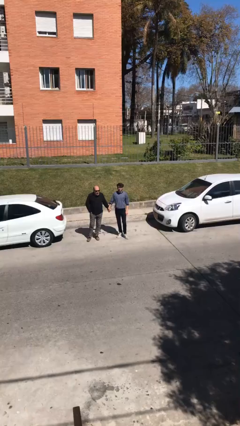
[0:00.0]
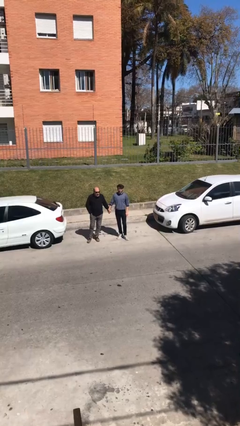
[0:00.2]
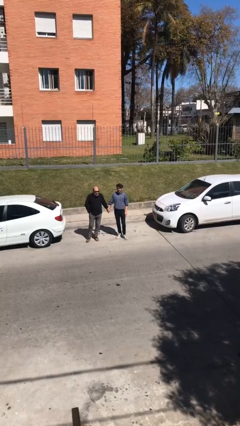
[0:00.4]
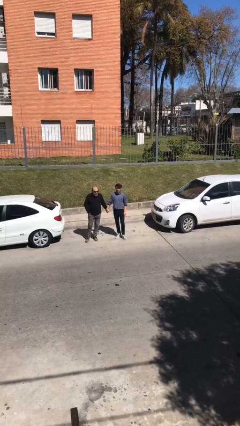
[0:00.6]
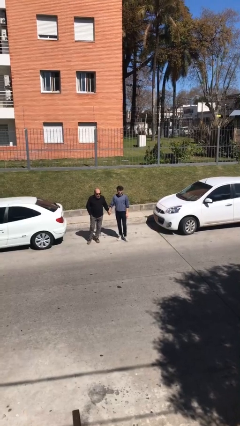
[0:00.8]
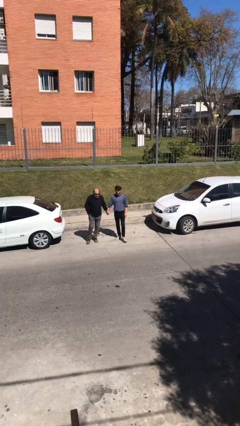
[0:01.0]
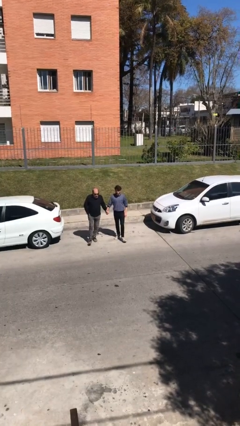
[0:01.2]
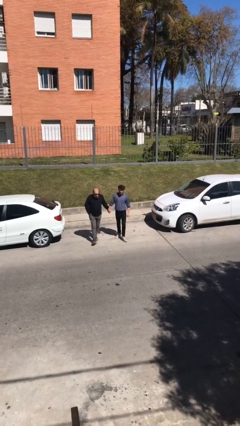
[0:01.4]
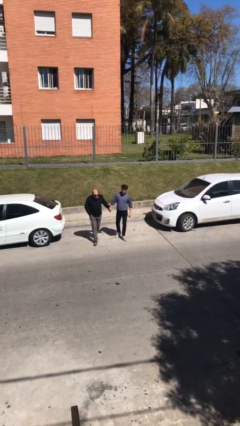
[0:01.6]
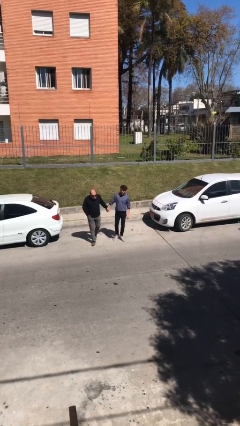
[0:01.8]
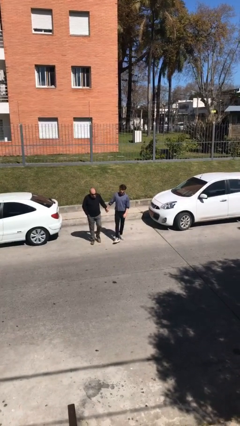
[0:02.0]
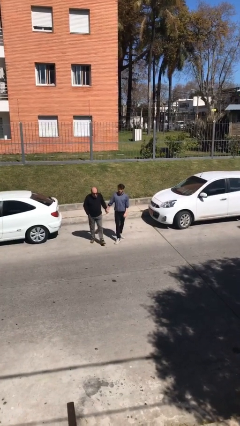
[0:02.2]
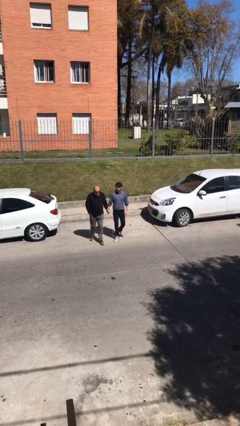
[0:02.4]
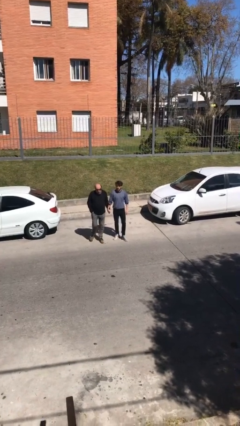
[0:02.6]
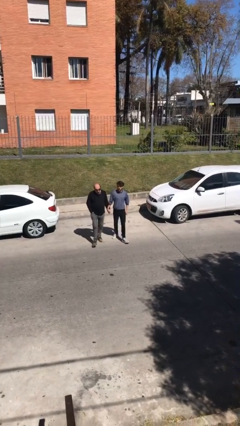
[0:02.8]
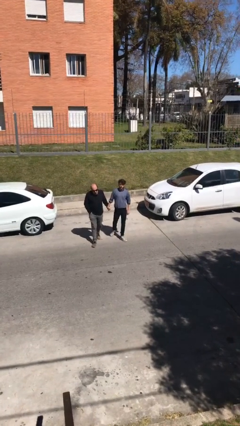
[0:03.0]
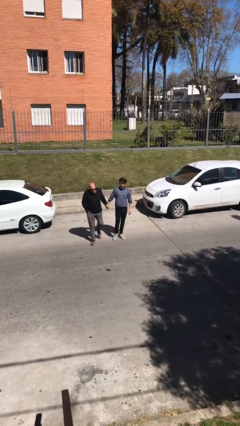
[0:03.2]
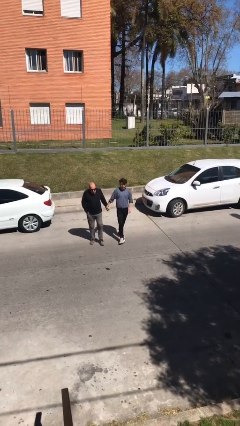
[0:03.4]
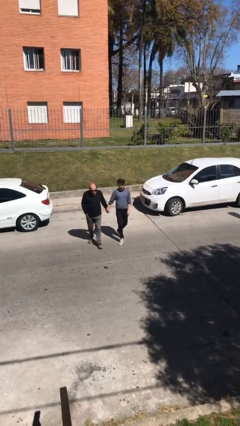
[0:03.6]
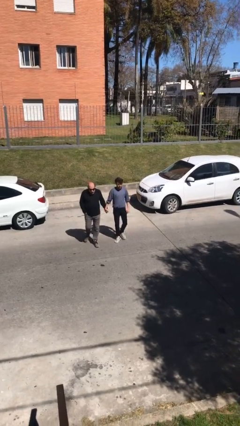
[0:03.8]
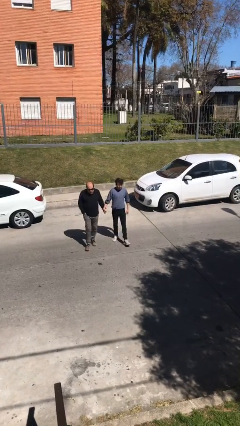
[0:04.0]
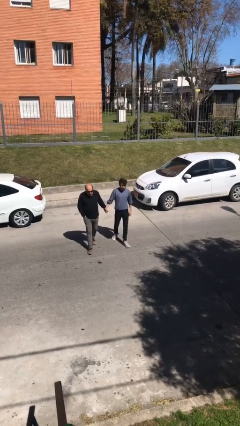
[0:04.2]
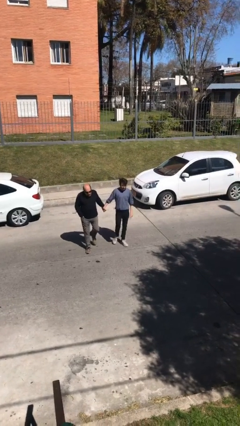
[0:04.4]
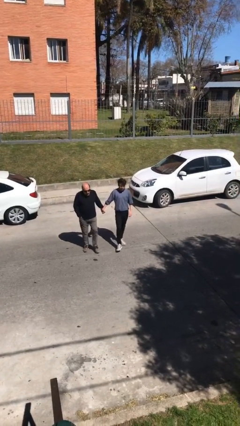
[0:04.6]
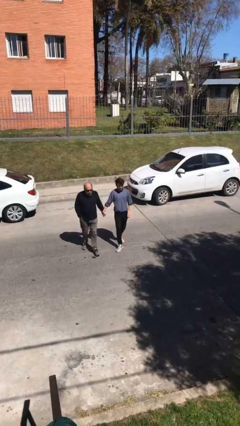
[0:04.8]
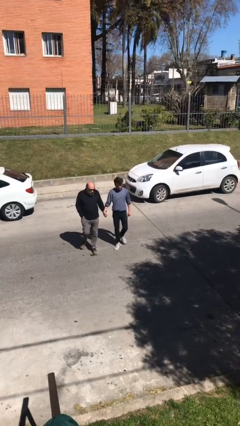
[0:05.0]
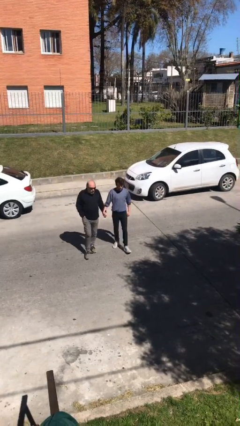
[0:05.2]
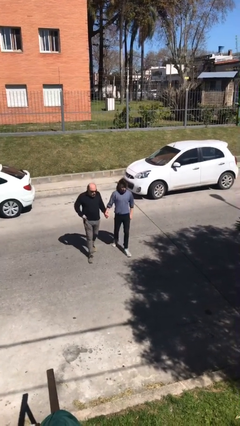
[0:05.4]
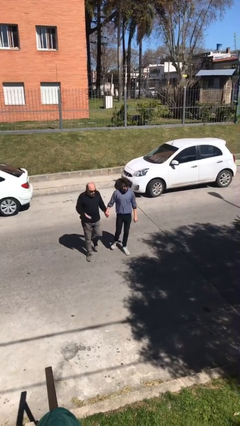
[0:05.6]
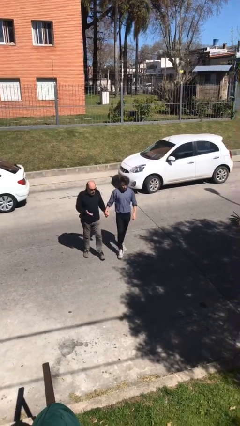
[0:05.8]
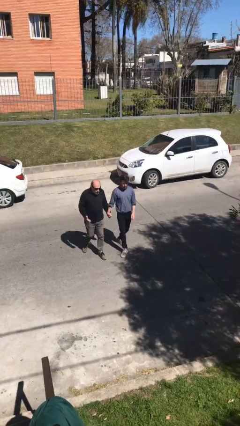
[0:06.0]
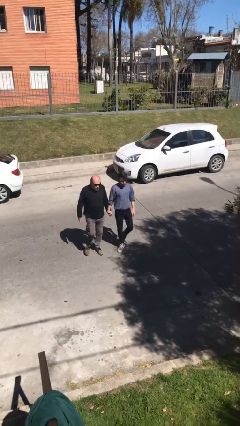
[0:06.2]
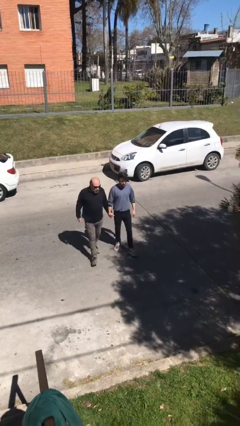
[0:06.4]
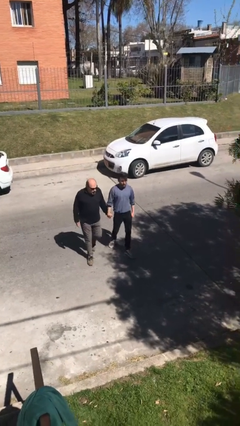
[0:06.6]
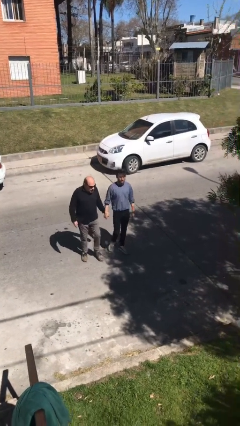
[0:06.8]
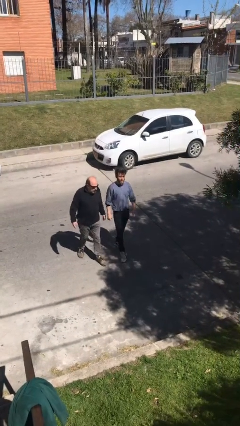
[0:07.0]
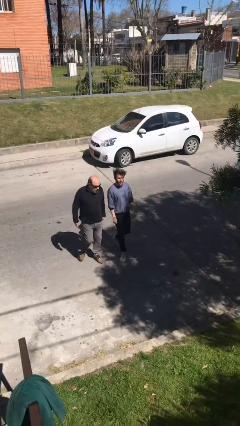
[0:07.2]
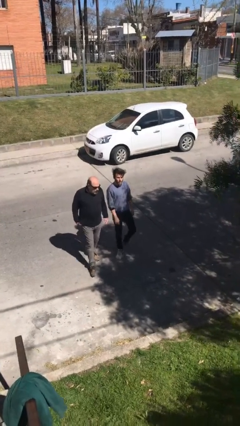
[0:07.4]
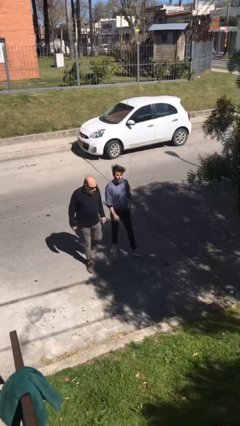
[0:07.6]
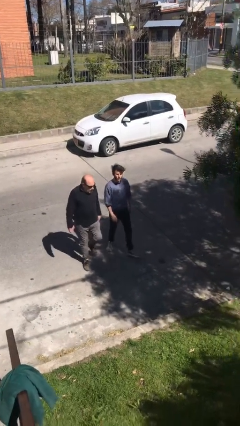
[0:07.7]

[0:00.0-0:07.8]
person holds hand

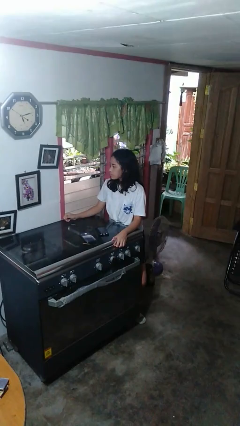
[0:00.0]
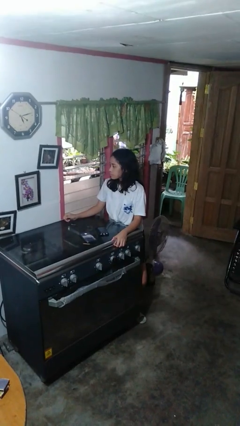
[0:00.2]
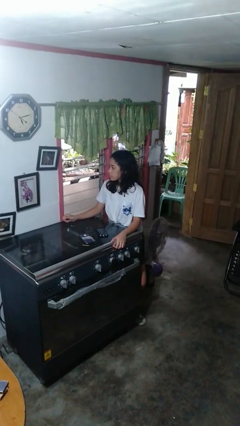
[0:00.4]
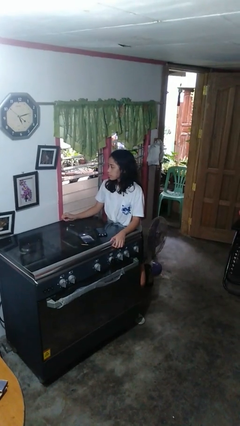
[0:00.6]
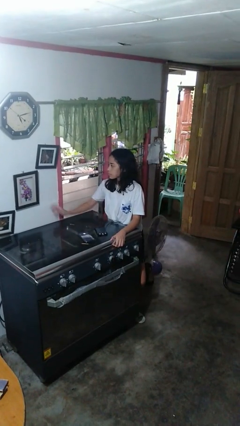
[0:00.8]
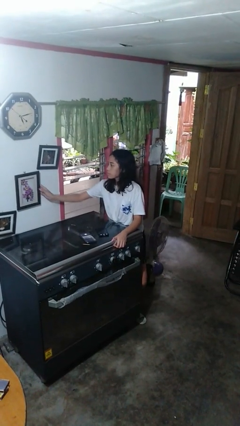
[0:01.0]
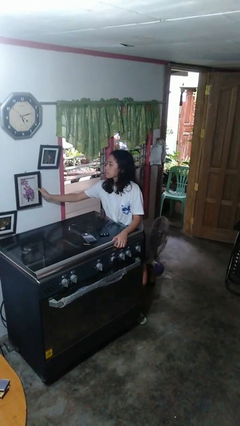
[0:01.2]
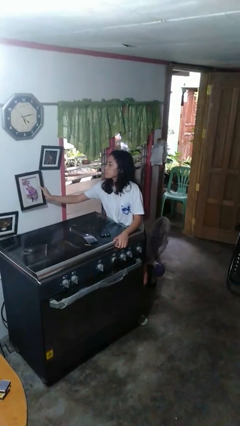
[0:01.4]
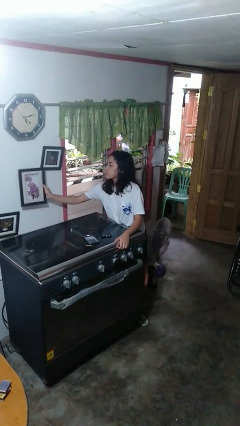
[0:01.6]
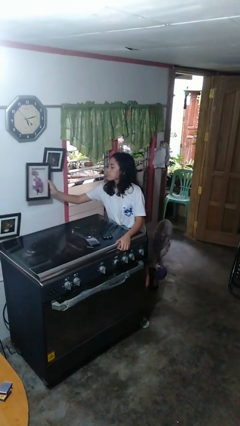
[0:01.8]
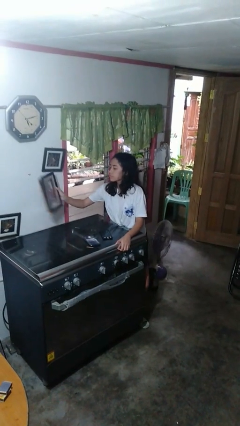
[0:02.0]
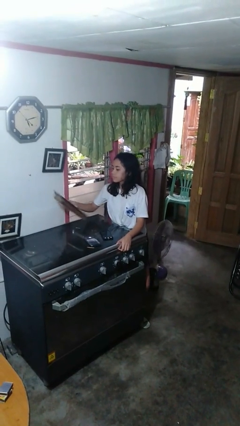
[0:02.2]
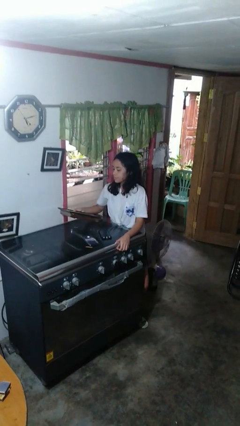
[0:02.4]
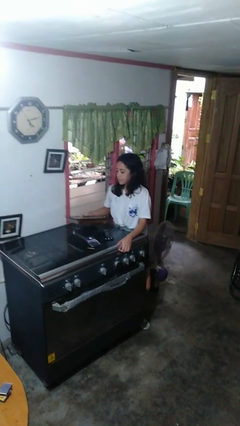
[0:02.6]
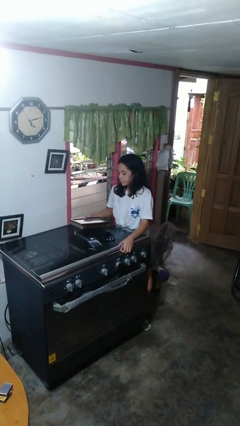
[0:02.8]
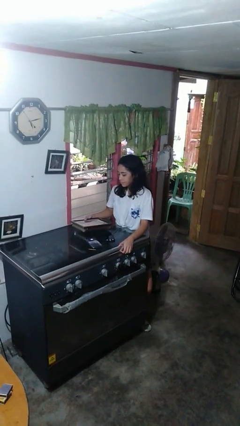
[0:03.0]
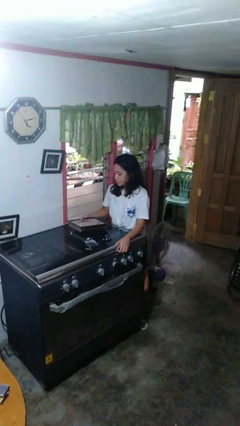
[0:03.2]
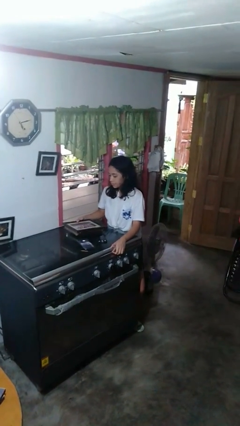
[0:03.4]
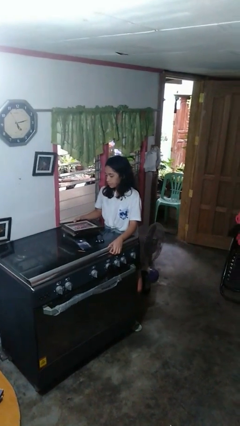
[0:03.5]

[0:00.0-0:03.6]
person takes down picture frame

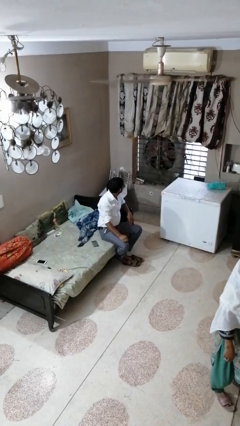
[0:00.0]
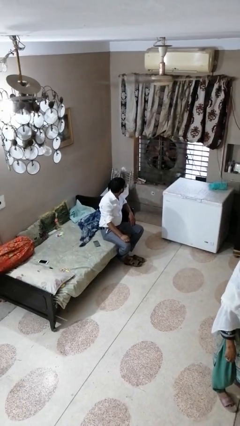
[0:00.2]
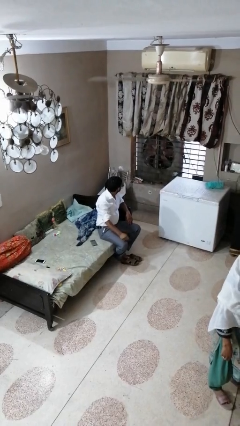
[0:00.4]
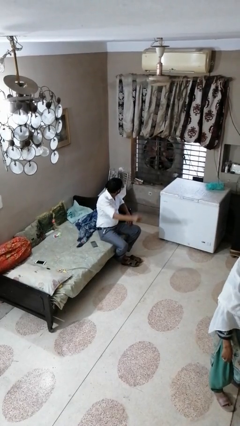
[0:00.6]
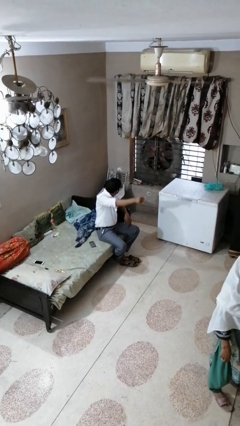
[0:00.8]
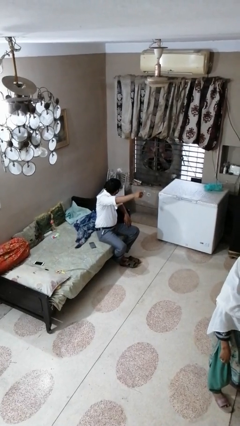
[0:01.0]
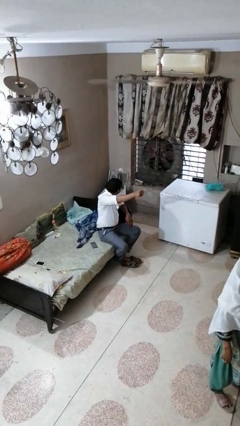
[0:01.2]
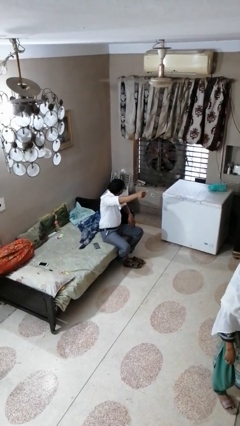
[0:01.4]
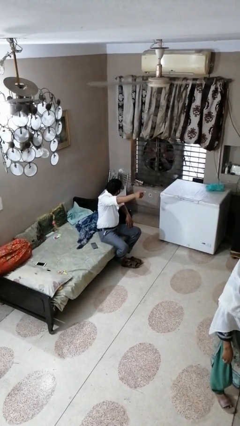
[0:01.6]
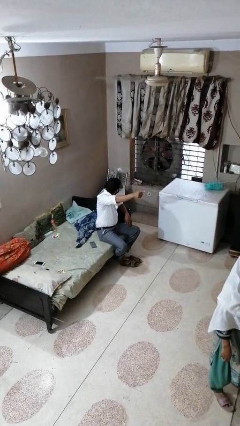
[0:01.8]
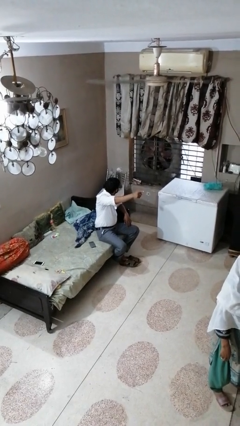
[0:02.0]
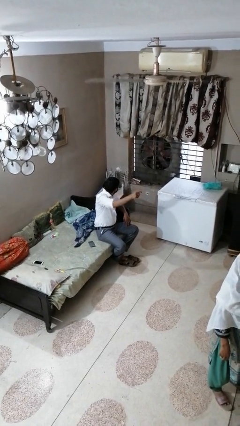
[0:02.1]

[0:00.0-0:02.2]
person points at person

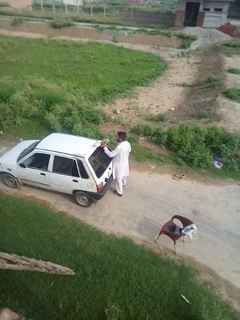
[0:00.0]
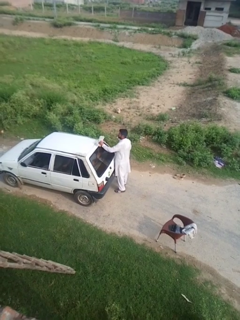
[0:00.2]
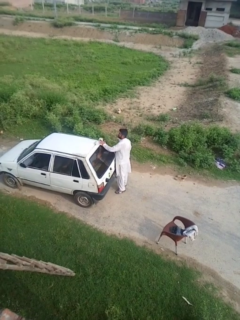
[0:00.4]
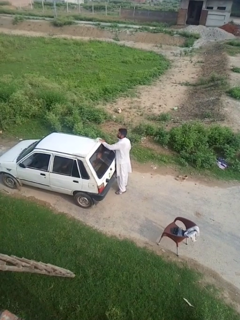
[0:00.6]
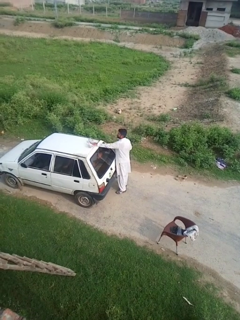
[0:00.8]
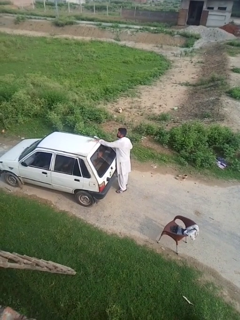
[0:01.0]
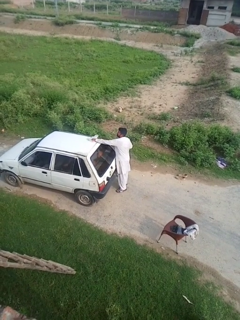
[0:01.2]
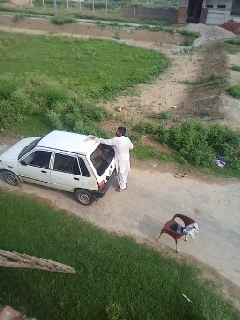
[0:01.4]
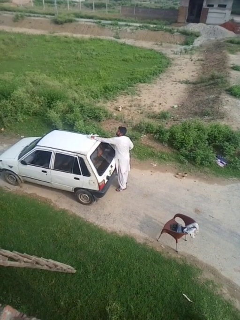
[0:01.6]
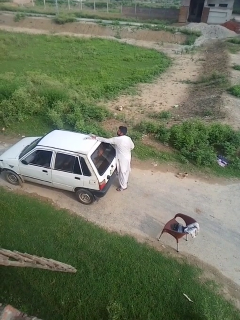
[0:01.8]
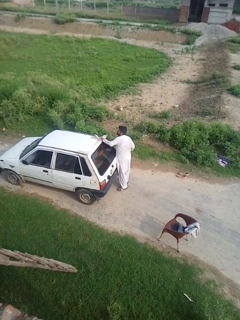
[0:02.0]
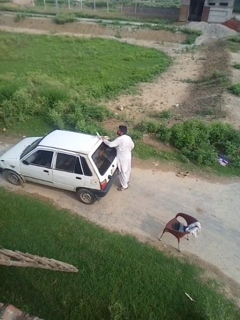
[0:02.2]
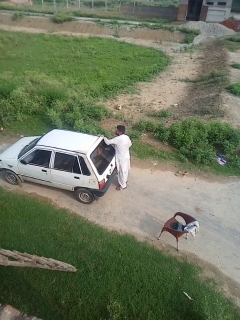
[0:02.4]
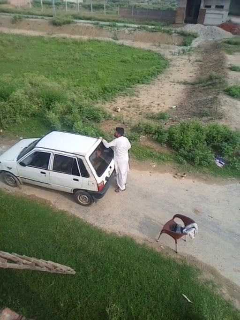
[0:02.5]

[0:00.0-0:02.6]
person polishes car with rag

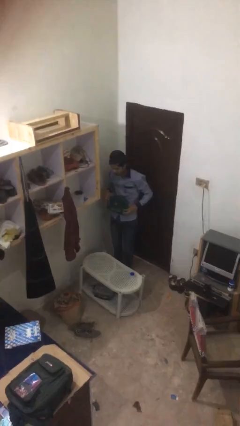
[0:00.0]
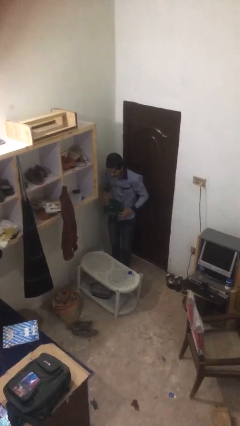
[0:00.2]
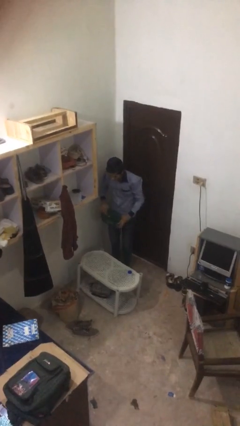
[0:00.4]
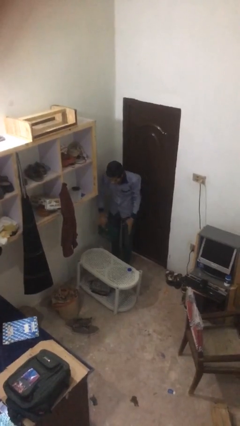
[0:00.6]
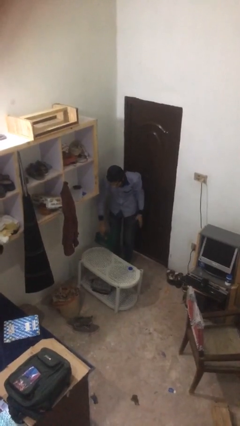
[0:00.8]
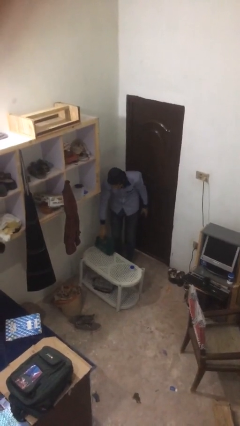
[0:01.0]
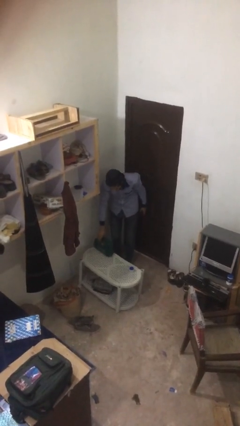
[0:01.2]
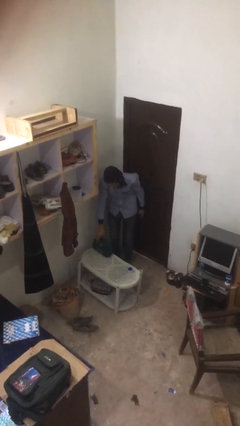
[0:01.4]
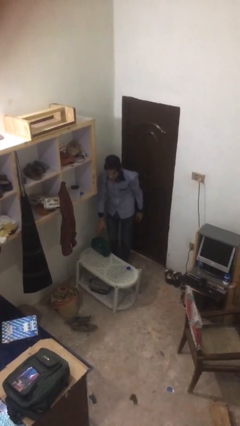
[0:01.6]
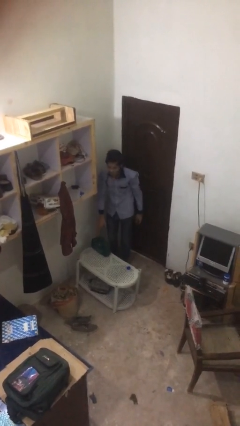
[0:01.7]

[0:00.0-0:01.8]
person puts down object on table
